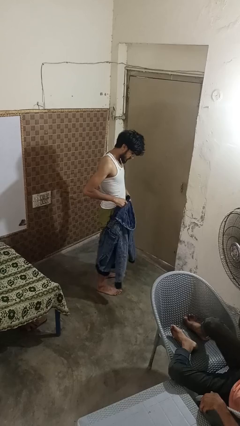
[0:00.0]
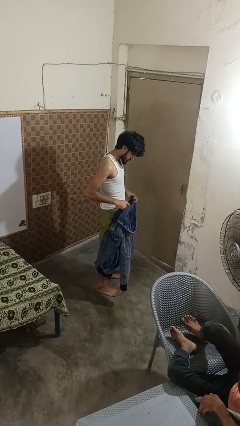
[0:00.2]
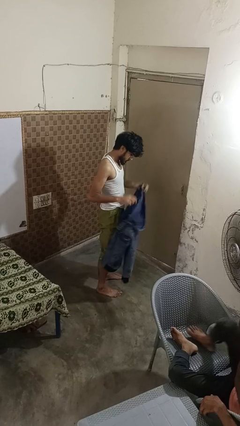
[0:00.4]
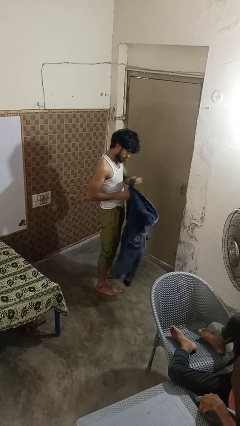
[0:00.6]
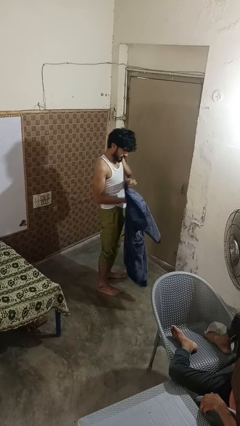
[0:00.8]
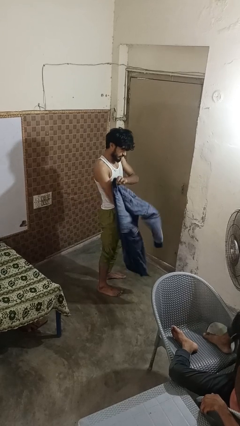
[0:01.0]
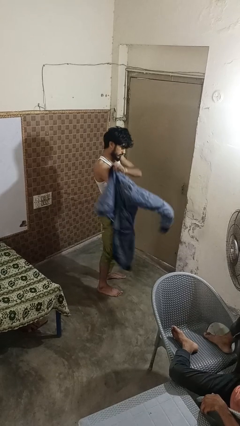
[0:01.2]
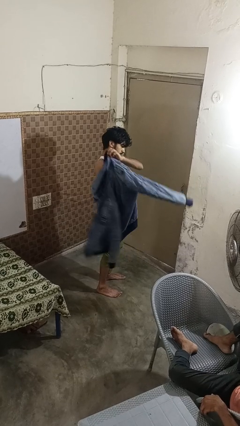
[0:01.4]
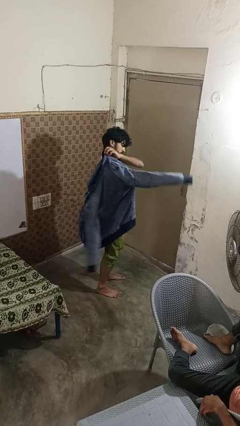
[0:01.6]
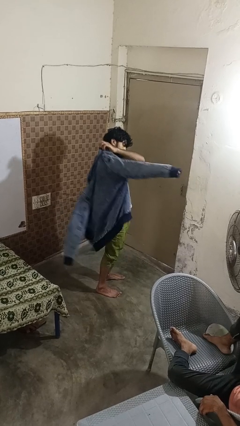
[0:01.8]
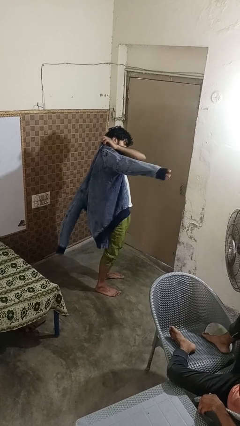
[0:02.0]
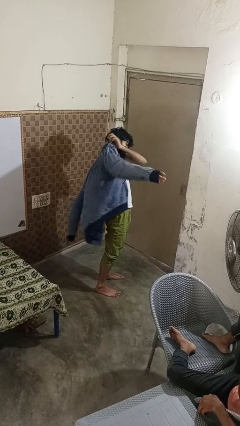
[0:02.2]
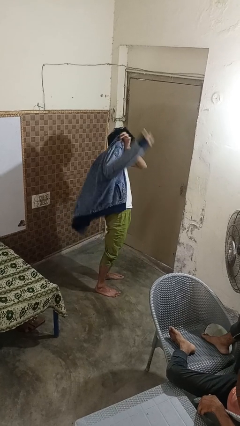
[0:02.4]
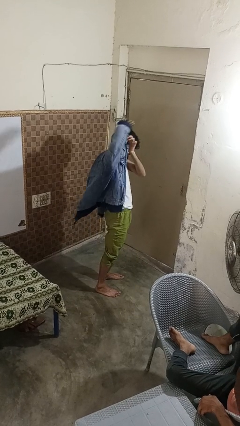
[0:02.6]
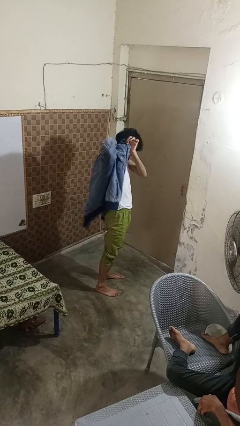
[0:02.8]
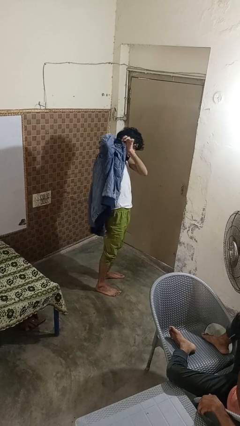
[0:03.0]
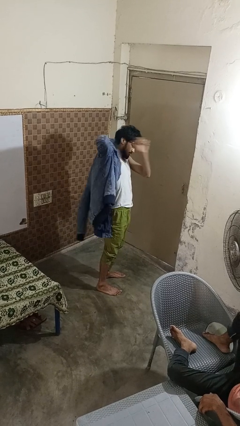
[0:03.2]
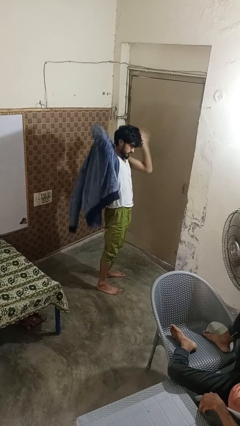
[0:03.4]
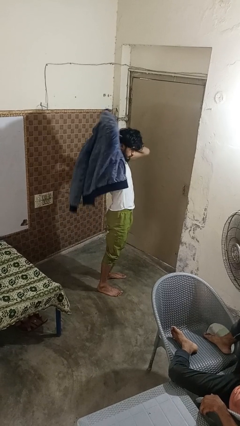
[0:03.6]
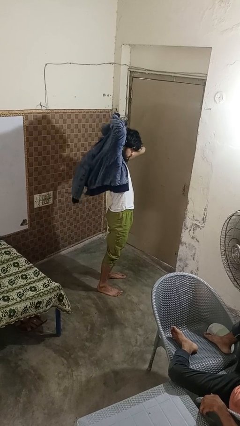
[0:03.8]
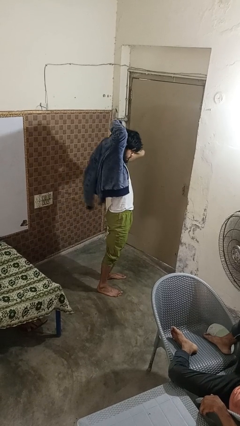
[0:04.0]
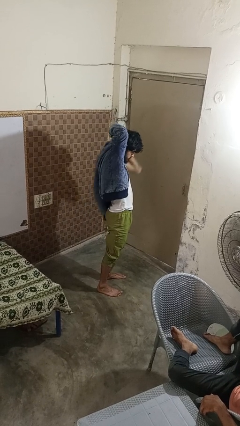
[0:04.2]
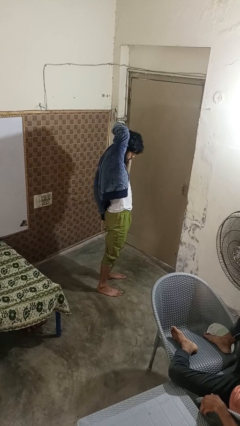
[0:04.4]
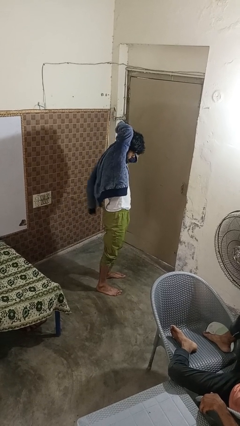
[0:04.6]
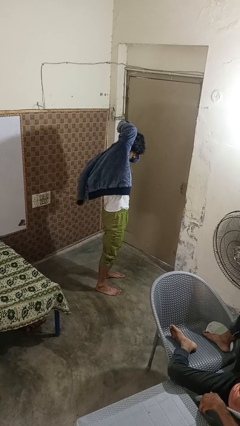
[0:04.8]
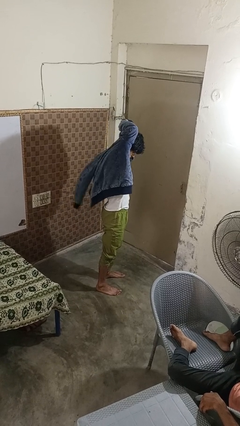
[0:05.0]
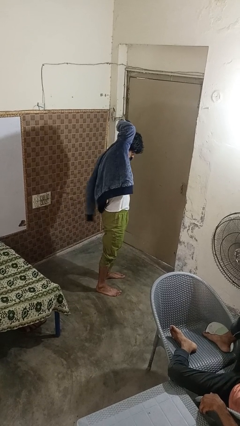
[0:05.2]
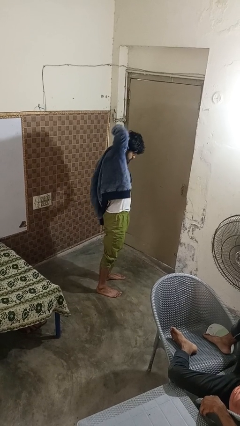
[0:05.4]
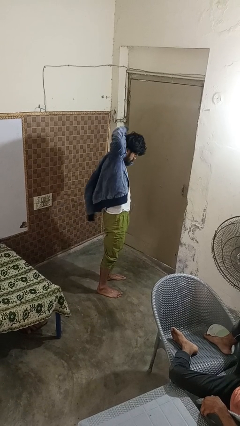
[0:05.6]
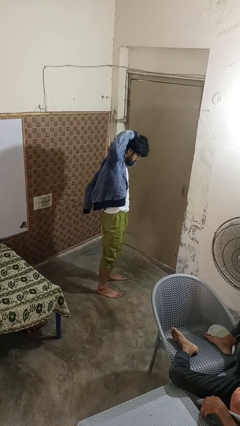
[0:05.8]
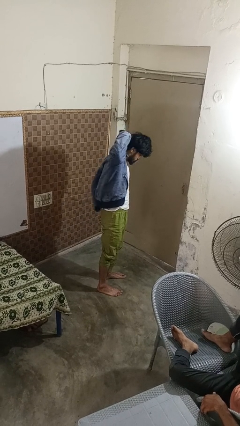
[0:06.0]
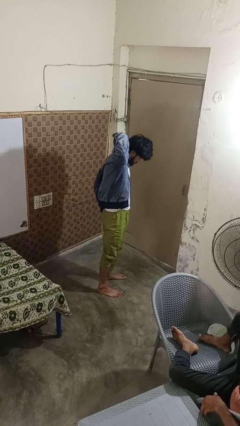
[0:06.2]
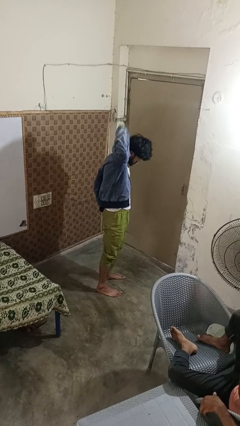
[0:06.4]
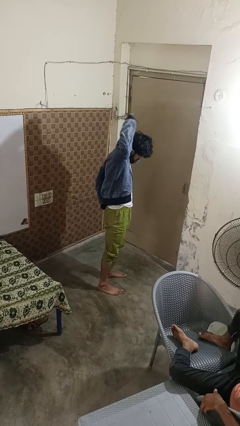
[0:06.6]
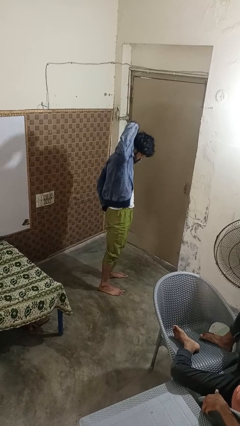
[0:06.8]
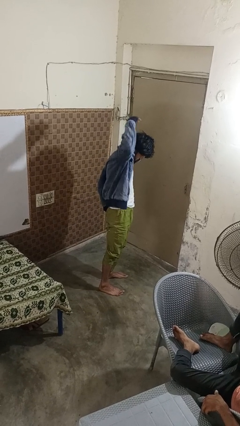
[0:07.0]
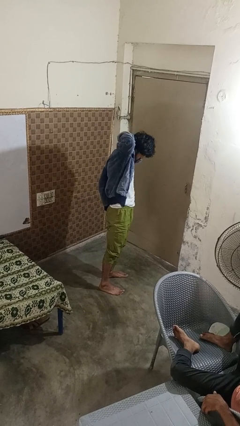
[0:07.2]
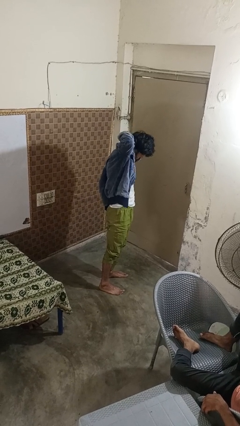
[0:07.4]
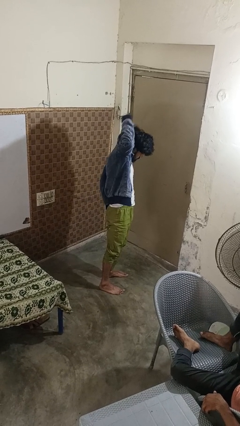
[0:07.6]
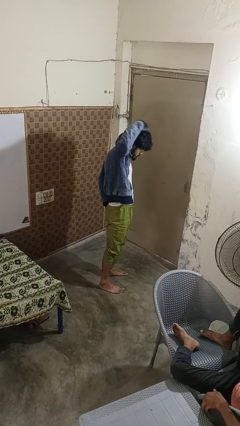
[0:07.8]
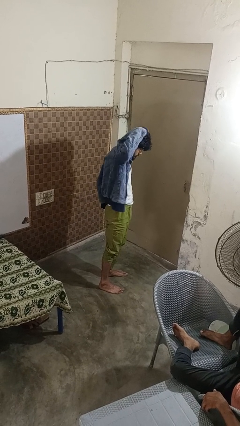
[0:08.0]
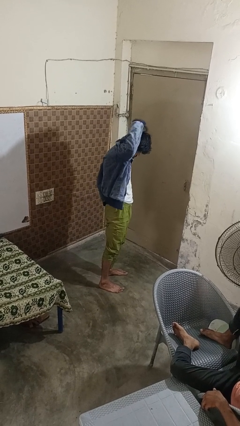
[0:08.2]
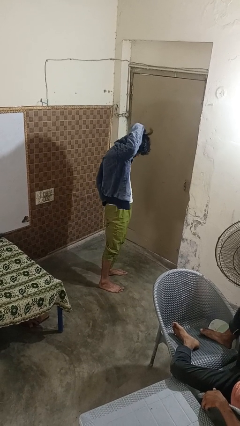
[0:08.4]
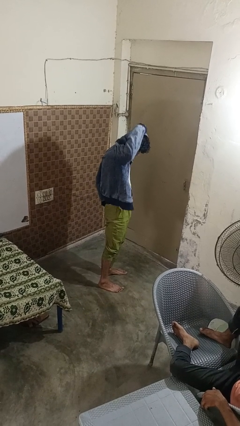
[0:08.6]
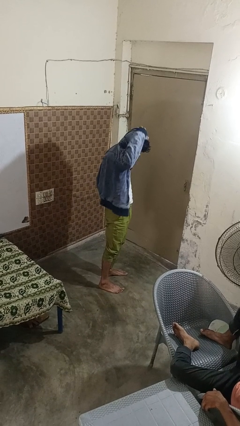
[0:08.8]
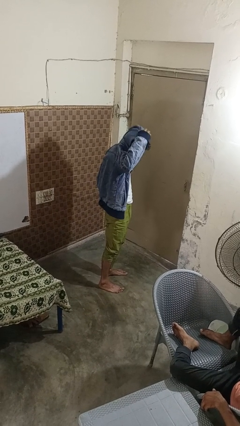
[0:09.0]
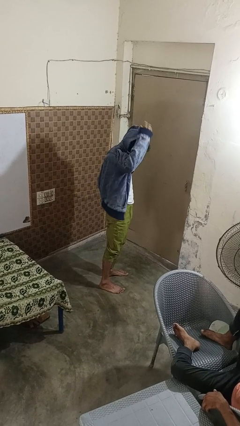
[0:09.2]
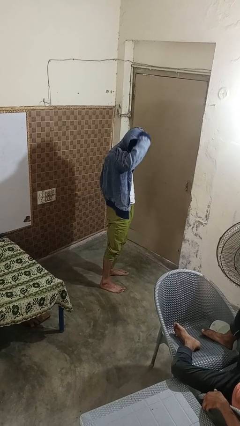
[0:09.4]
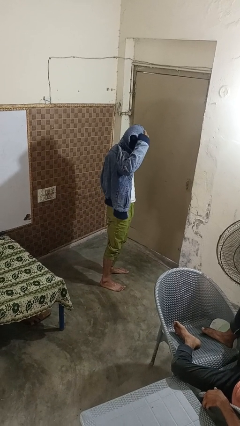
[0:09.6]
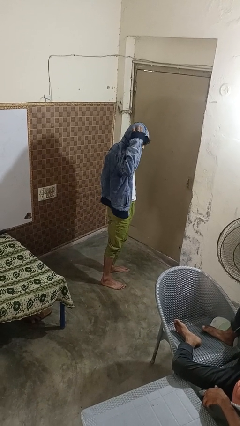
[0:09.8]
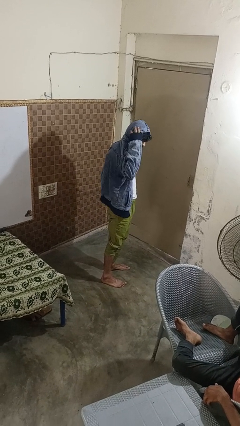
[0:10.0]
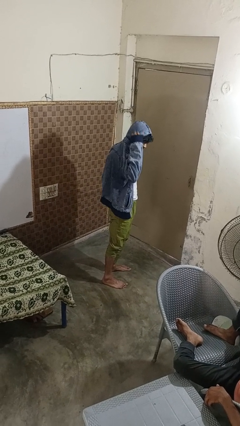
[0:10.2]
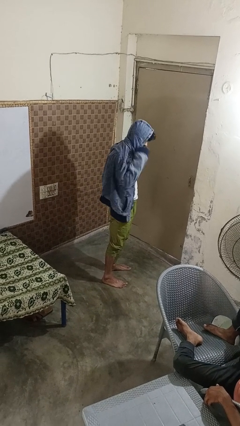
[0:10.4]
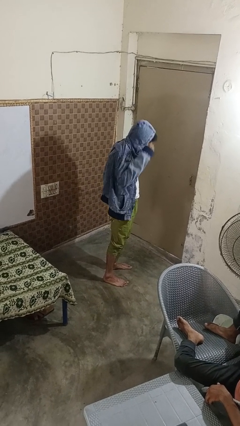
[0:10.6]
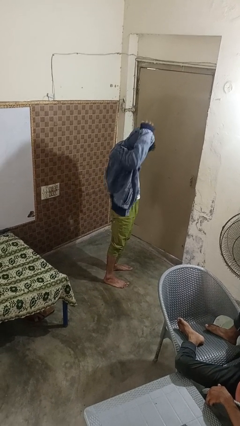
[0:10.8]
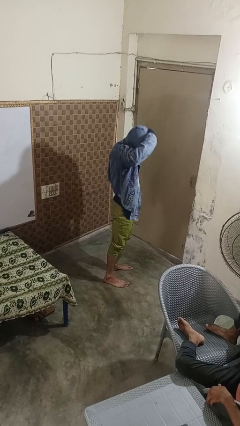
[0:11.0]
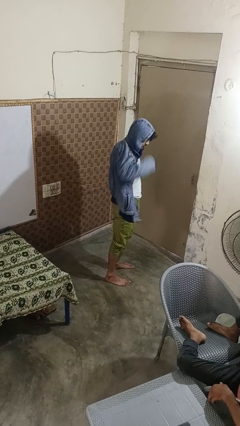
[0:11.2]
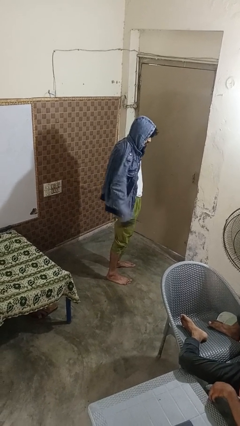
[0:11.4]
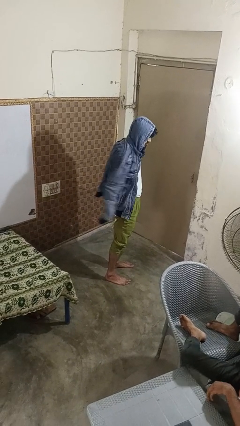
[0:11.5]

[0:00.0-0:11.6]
person puts on hoodie

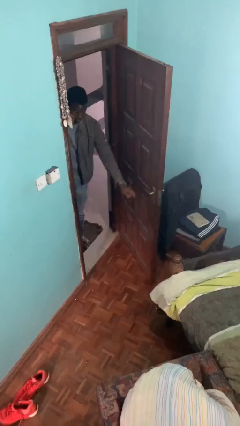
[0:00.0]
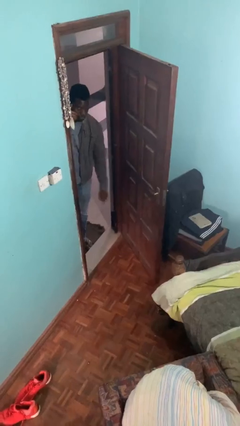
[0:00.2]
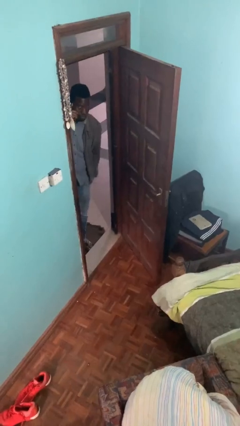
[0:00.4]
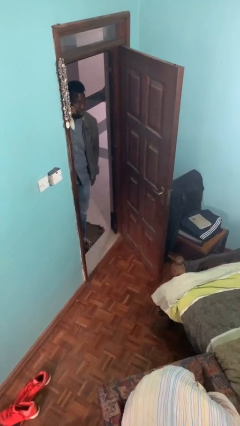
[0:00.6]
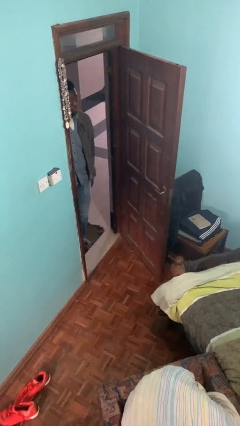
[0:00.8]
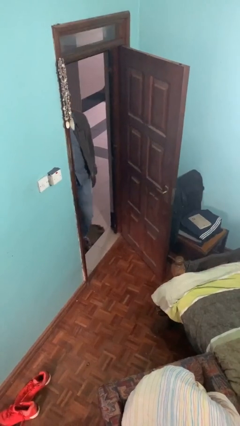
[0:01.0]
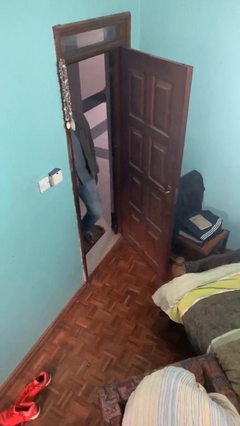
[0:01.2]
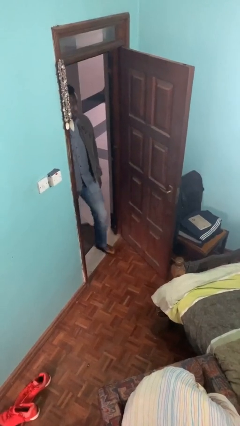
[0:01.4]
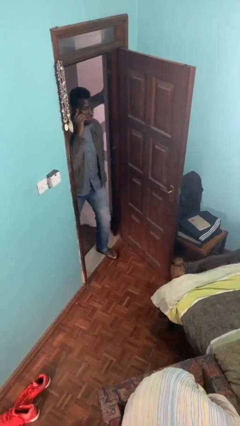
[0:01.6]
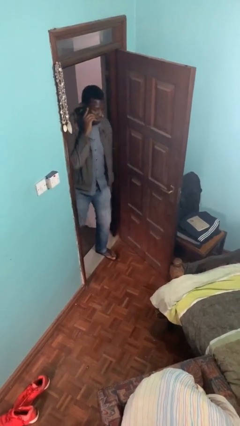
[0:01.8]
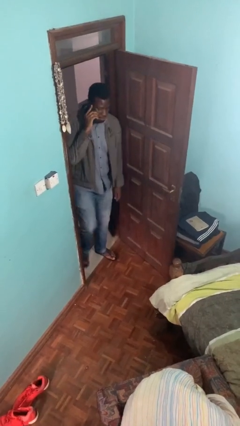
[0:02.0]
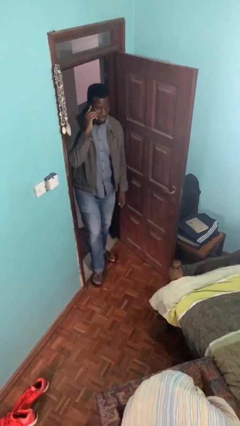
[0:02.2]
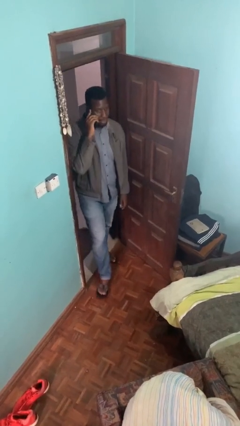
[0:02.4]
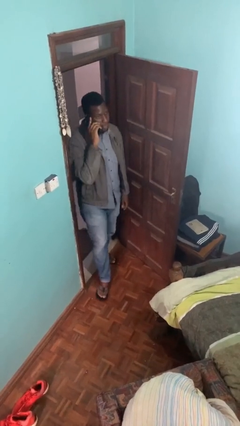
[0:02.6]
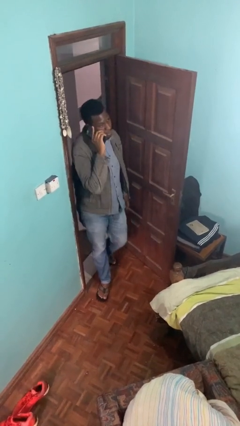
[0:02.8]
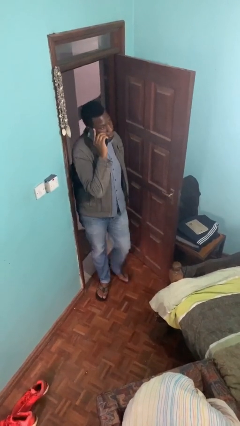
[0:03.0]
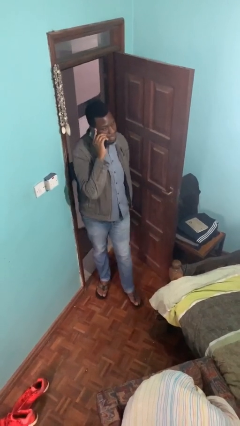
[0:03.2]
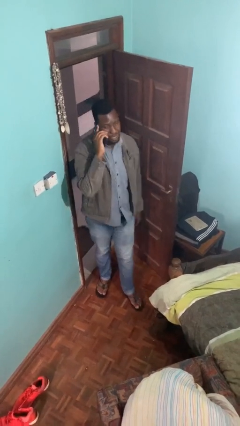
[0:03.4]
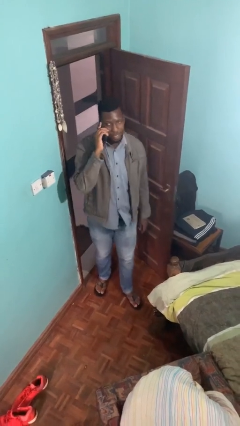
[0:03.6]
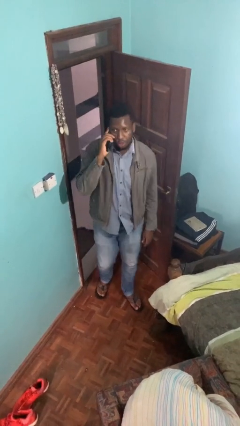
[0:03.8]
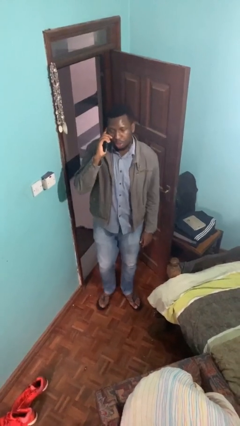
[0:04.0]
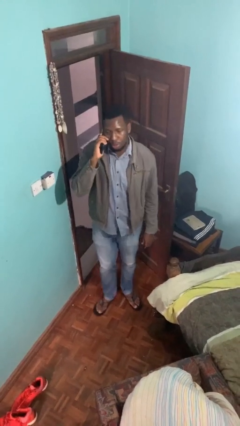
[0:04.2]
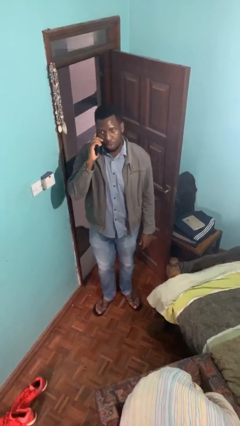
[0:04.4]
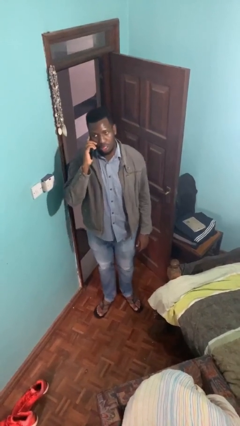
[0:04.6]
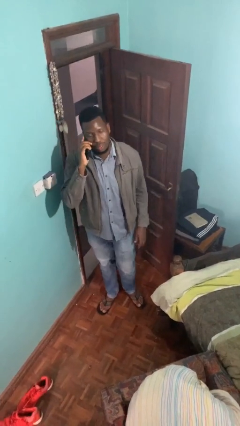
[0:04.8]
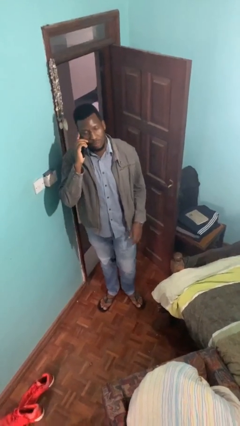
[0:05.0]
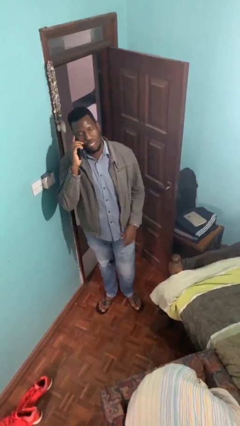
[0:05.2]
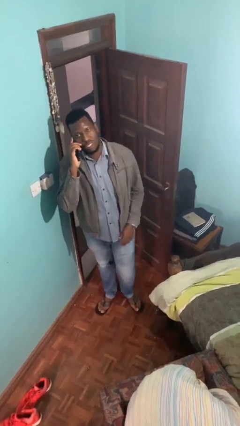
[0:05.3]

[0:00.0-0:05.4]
person enters scene through structure

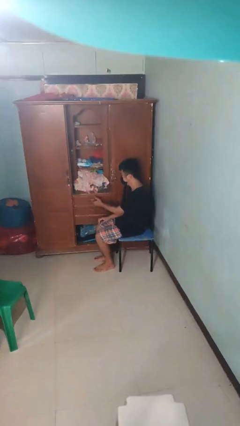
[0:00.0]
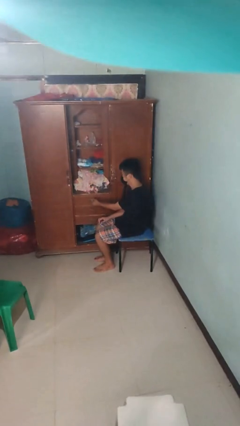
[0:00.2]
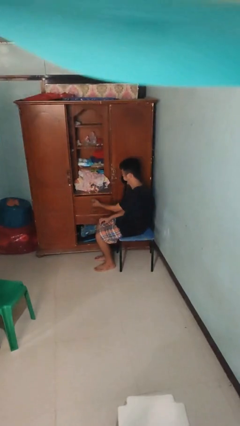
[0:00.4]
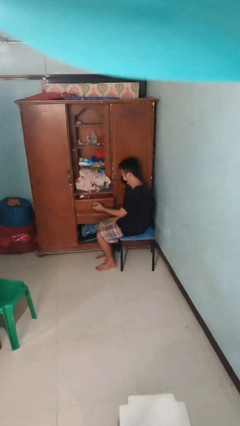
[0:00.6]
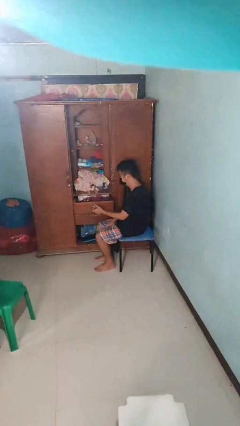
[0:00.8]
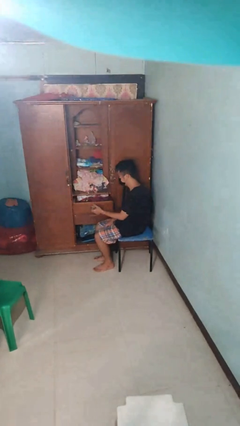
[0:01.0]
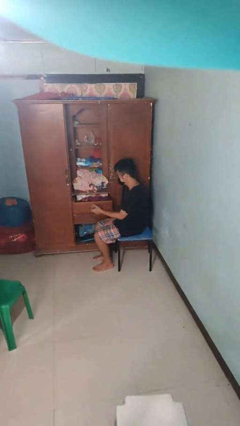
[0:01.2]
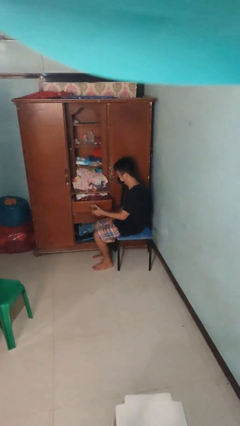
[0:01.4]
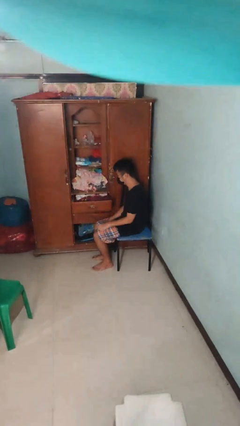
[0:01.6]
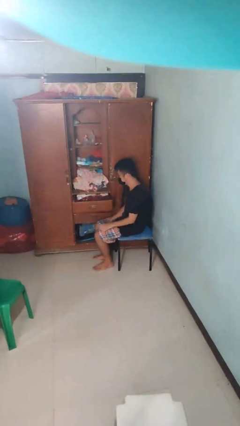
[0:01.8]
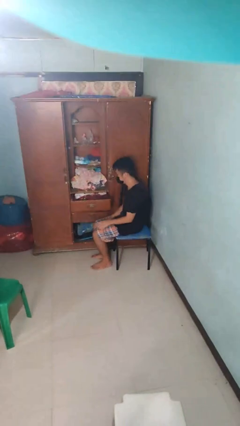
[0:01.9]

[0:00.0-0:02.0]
person opens dresser drawer
